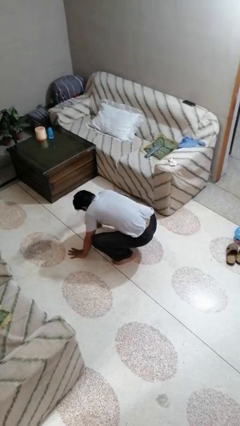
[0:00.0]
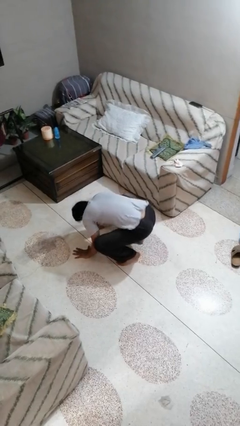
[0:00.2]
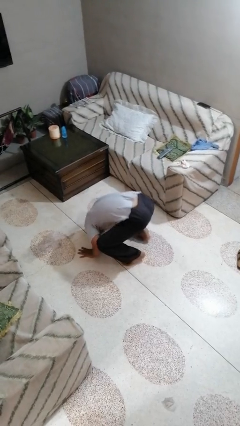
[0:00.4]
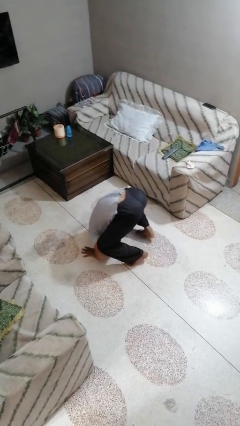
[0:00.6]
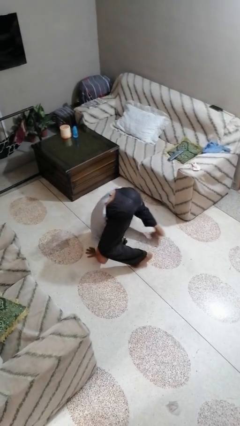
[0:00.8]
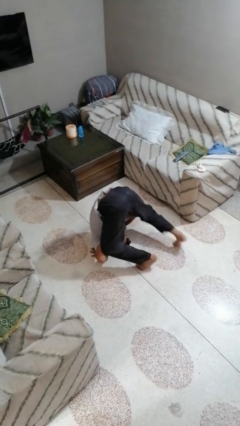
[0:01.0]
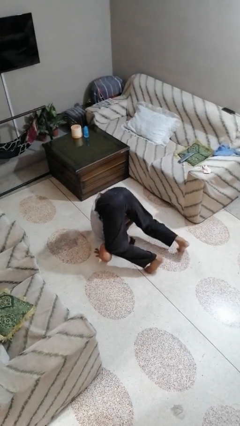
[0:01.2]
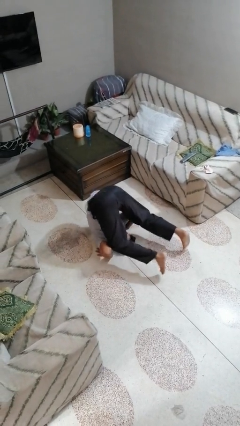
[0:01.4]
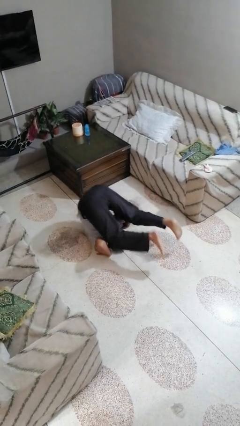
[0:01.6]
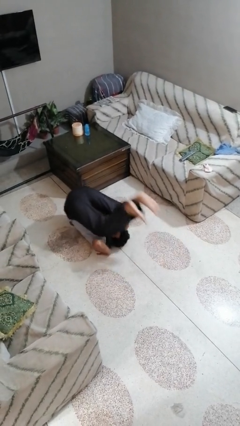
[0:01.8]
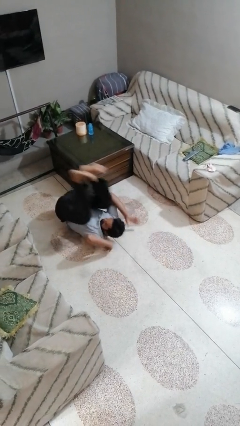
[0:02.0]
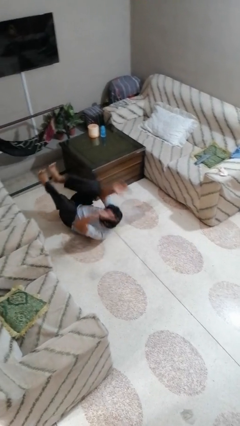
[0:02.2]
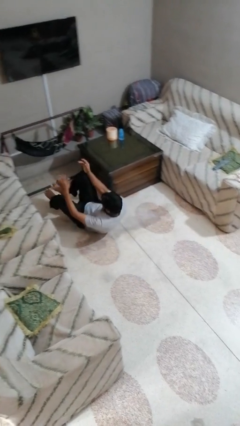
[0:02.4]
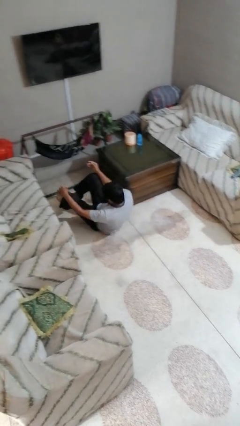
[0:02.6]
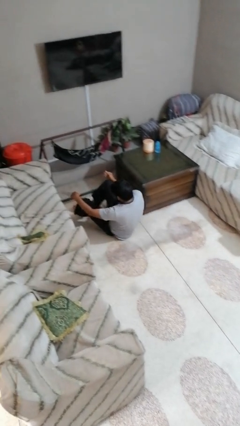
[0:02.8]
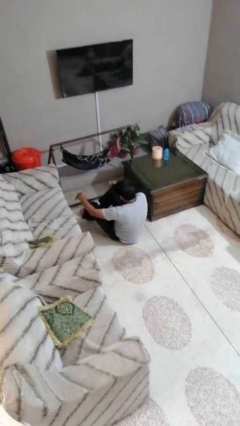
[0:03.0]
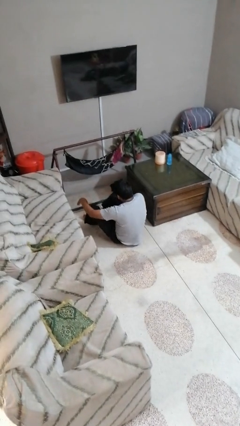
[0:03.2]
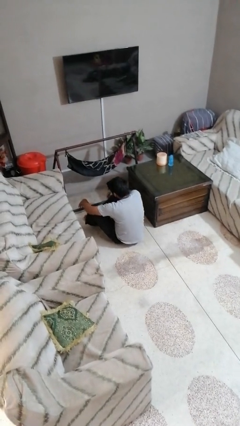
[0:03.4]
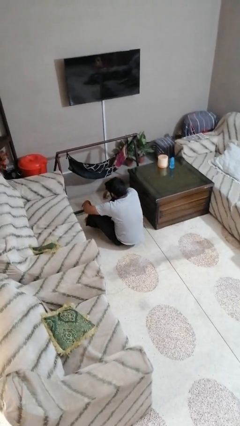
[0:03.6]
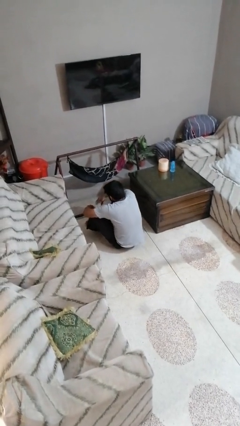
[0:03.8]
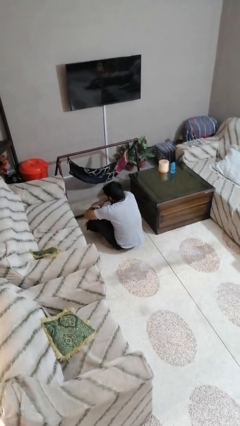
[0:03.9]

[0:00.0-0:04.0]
person somersaults

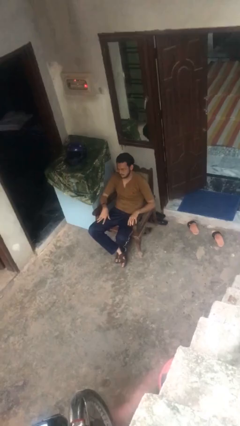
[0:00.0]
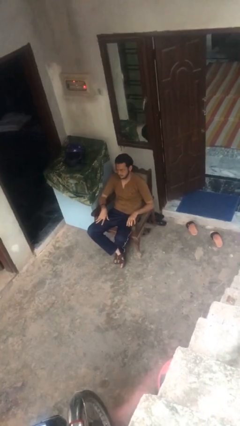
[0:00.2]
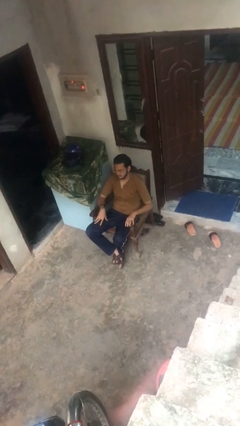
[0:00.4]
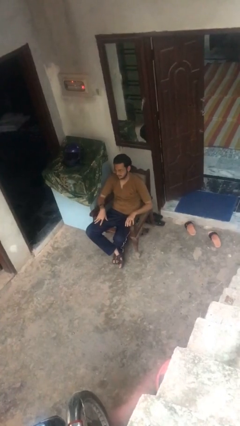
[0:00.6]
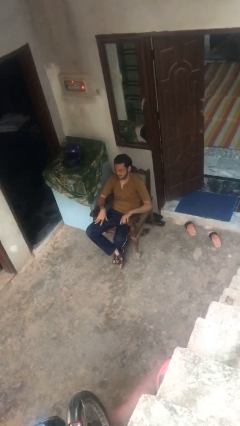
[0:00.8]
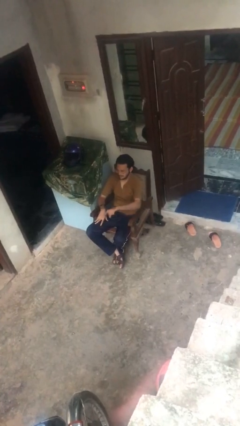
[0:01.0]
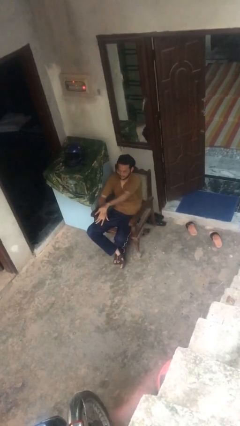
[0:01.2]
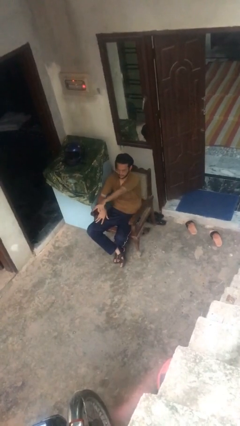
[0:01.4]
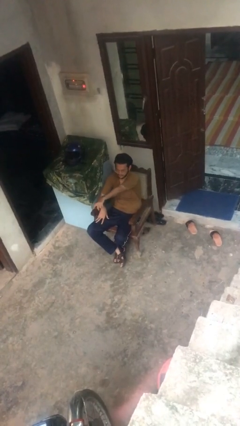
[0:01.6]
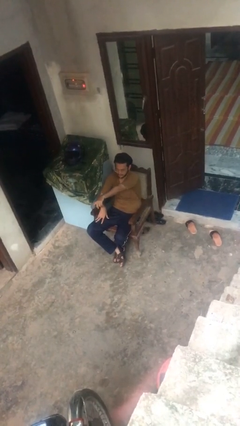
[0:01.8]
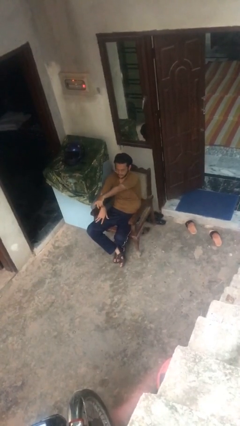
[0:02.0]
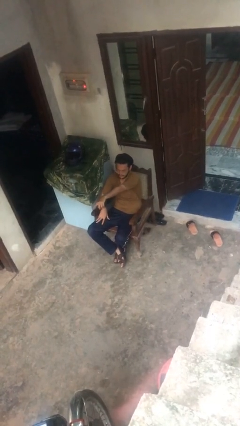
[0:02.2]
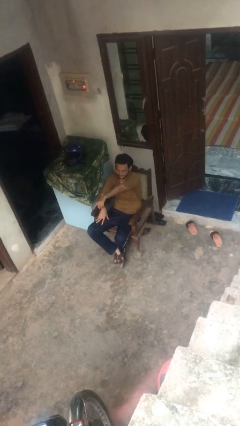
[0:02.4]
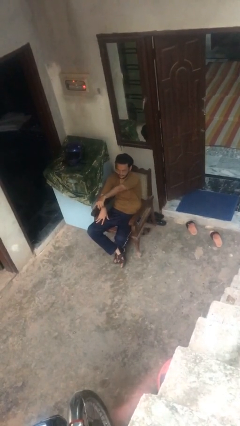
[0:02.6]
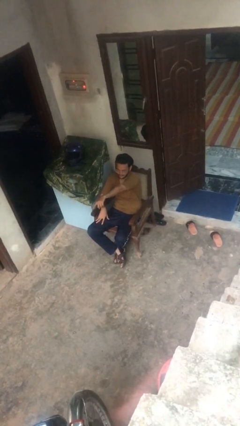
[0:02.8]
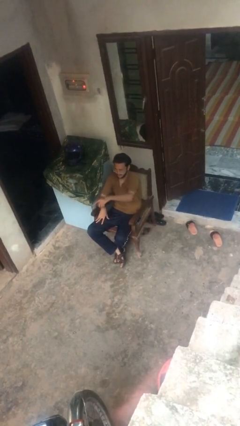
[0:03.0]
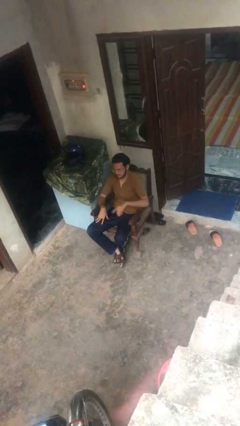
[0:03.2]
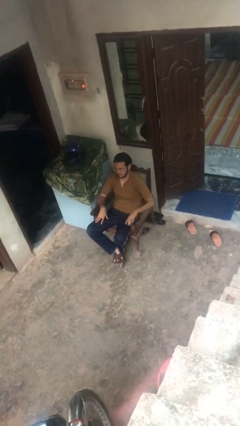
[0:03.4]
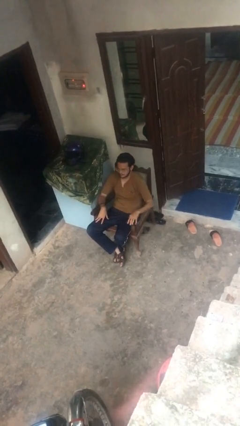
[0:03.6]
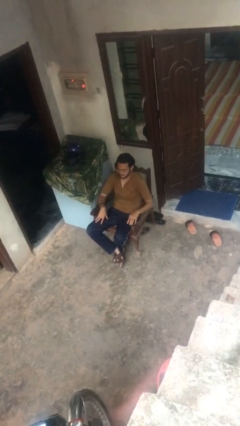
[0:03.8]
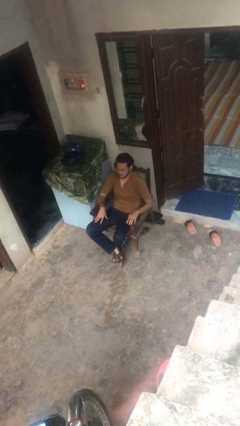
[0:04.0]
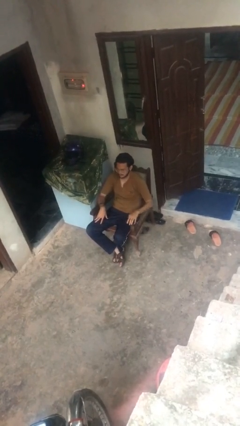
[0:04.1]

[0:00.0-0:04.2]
person points at person

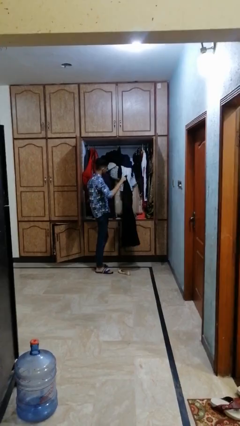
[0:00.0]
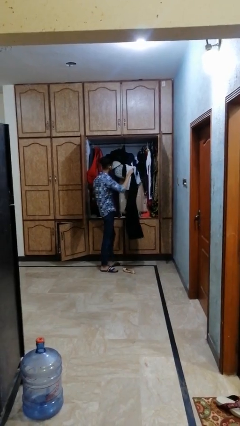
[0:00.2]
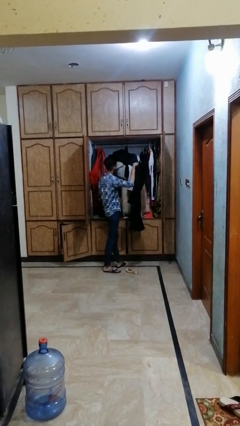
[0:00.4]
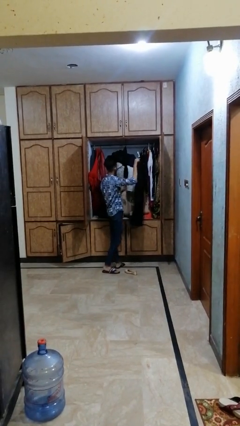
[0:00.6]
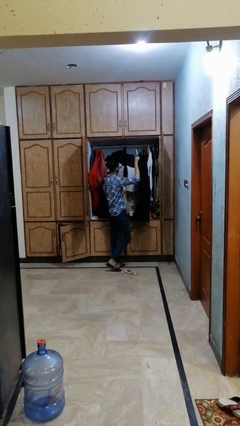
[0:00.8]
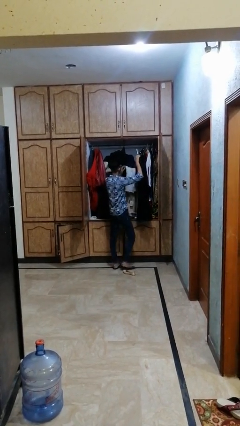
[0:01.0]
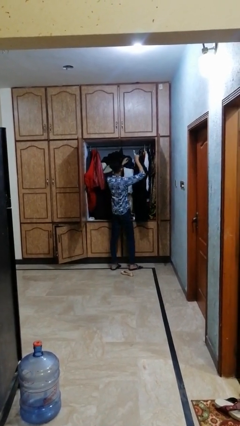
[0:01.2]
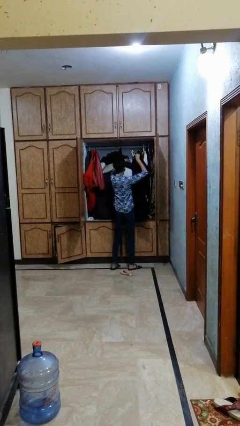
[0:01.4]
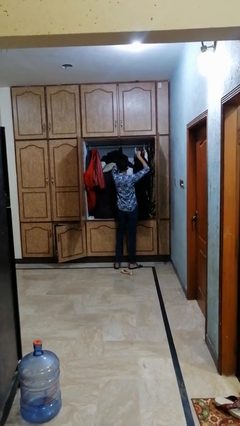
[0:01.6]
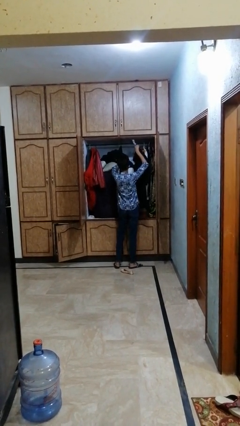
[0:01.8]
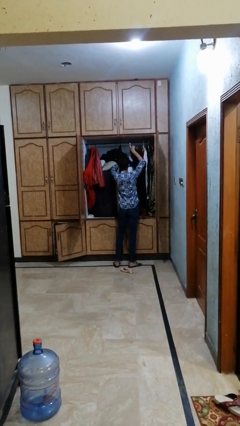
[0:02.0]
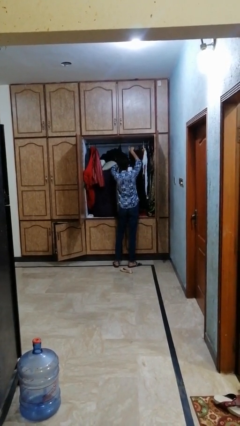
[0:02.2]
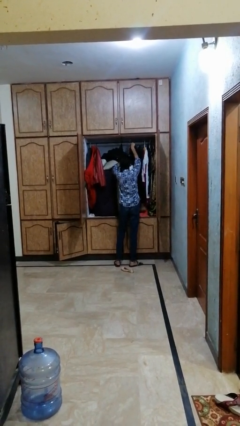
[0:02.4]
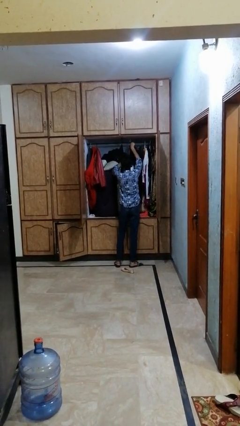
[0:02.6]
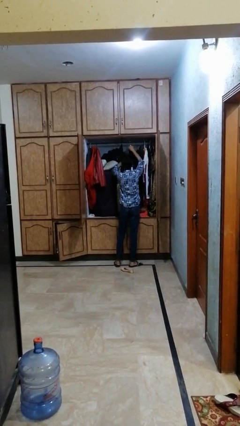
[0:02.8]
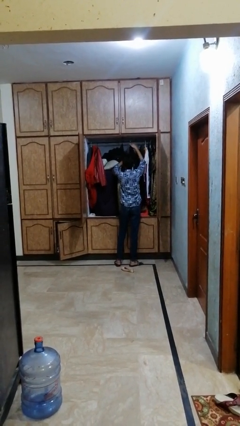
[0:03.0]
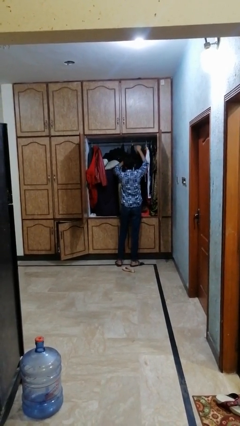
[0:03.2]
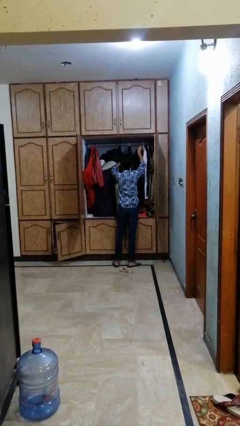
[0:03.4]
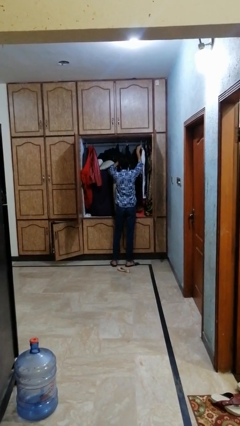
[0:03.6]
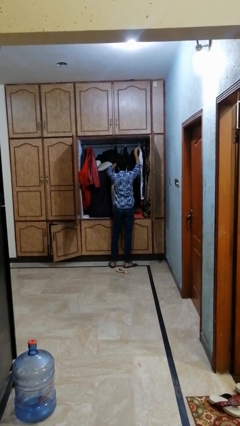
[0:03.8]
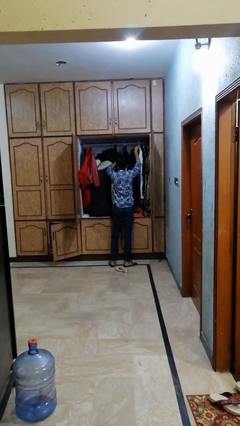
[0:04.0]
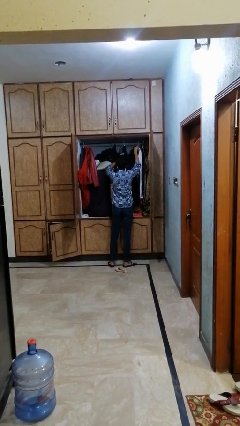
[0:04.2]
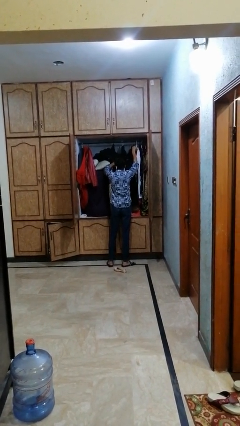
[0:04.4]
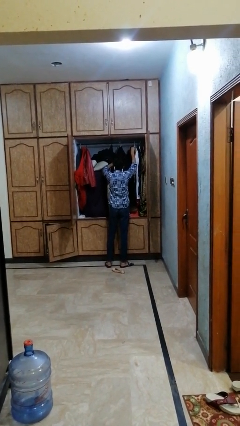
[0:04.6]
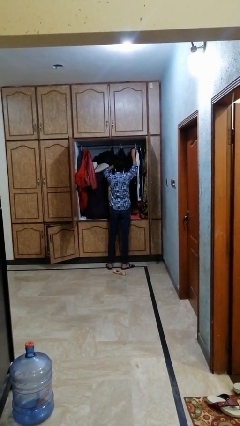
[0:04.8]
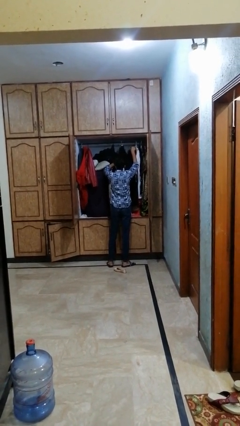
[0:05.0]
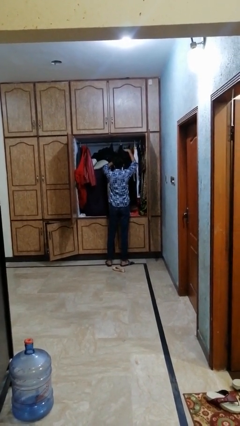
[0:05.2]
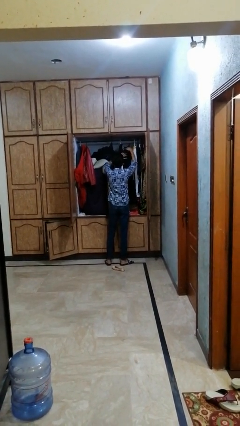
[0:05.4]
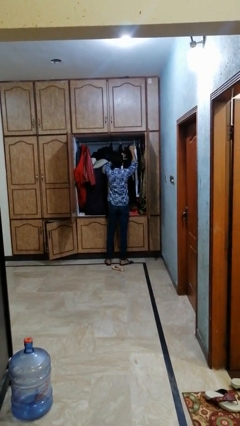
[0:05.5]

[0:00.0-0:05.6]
person puts clothes into dresser

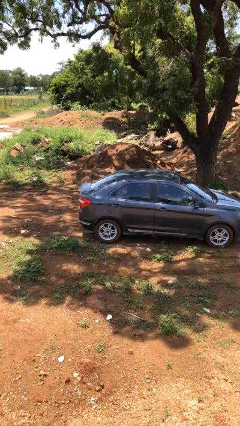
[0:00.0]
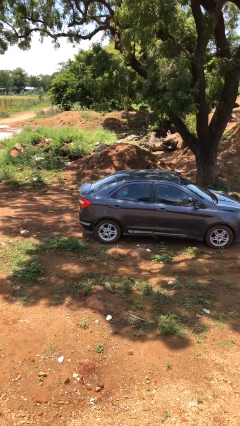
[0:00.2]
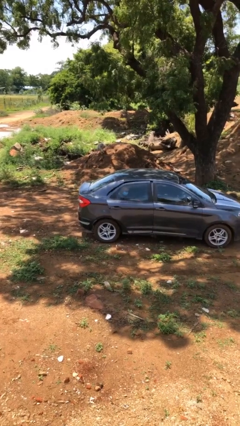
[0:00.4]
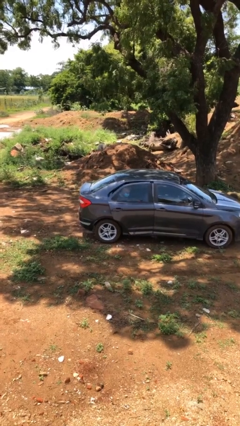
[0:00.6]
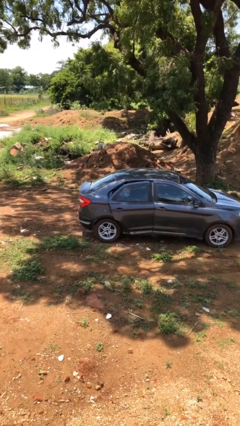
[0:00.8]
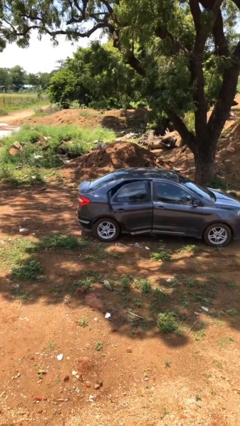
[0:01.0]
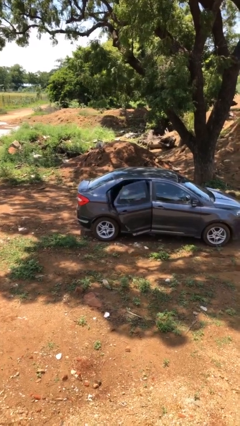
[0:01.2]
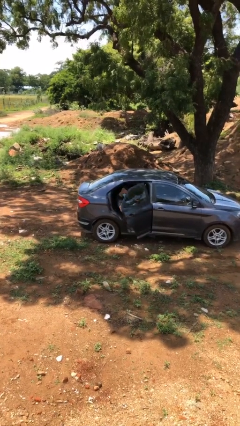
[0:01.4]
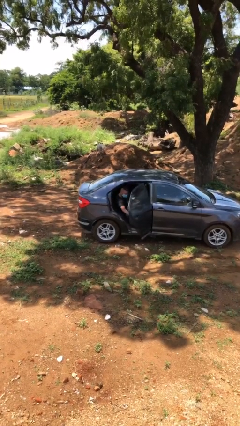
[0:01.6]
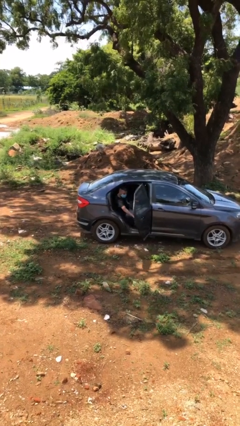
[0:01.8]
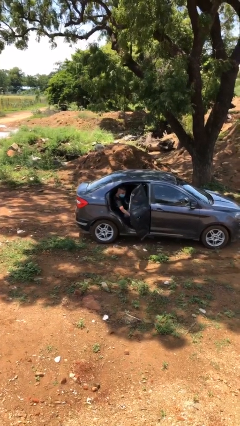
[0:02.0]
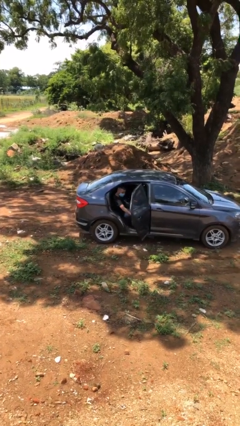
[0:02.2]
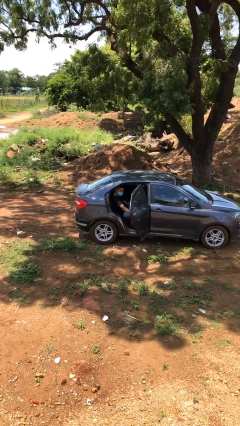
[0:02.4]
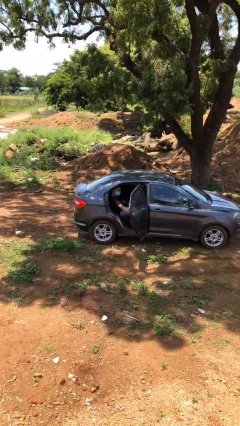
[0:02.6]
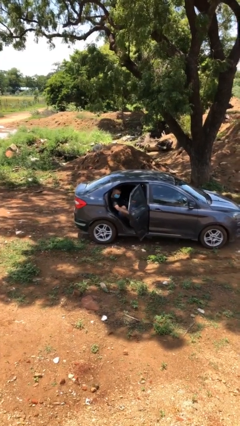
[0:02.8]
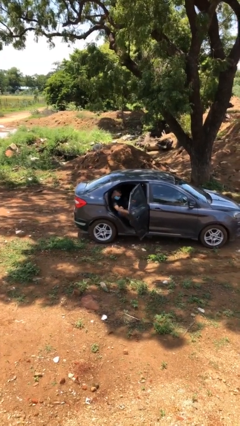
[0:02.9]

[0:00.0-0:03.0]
person opens car door

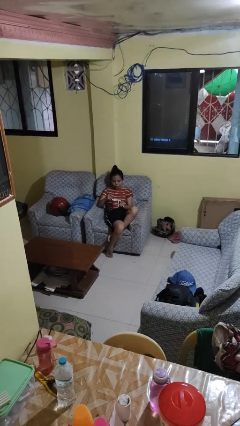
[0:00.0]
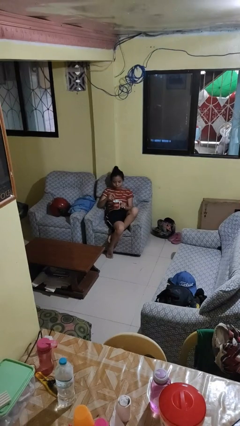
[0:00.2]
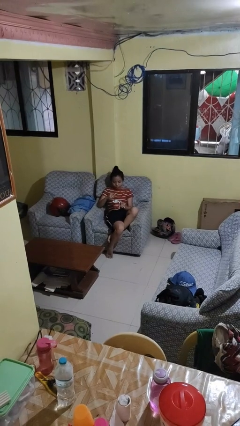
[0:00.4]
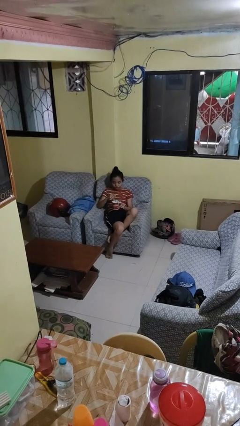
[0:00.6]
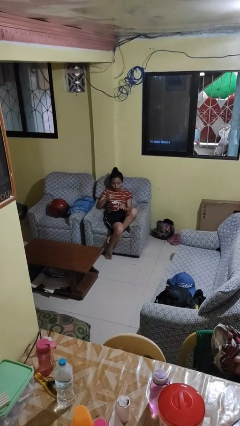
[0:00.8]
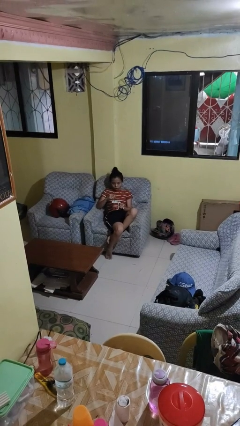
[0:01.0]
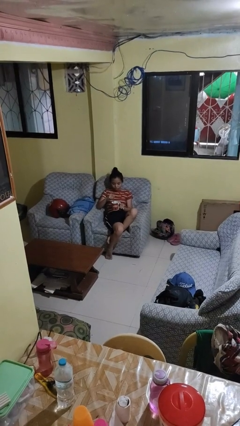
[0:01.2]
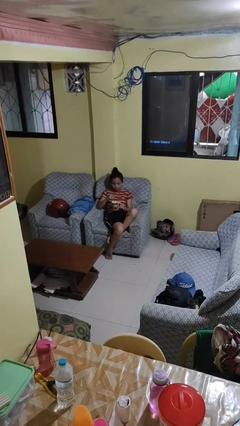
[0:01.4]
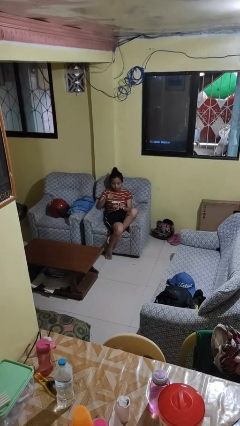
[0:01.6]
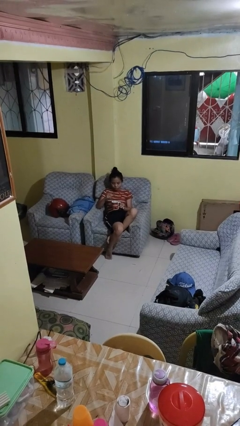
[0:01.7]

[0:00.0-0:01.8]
person stirs mug
